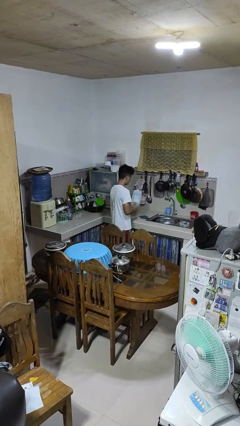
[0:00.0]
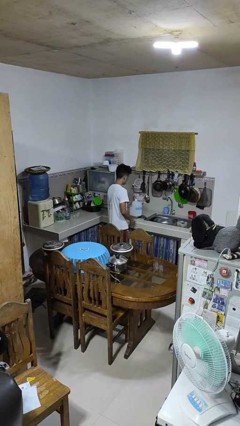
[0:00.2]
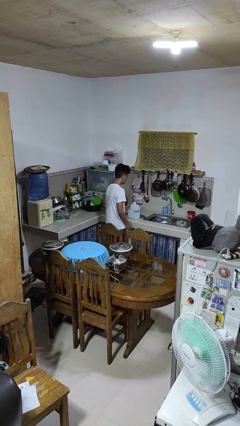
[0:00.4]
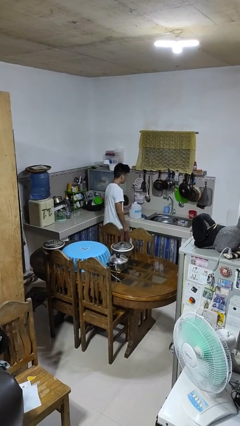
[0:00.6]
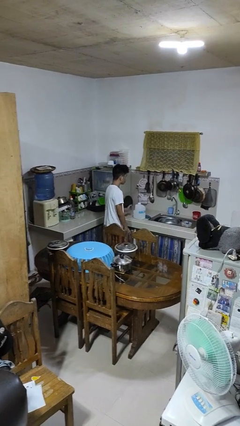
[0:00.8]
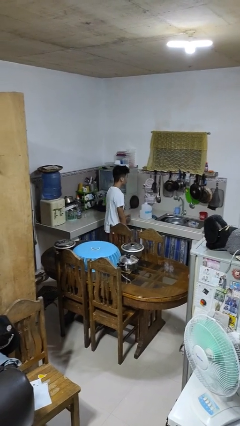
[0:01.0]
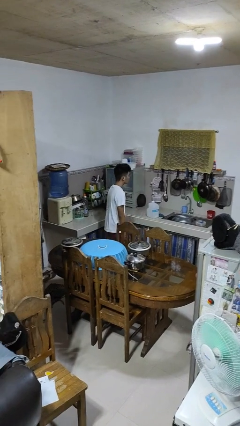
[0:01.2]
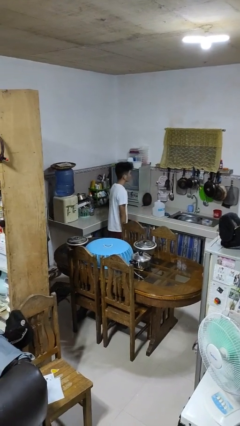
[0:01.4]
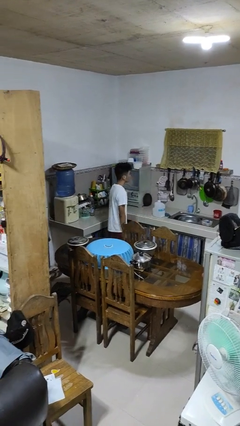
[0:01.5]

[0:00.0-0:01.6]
person puts down object on countertop

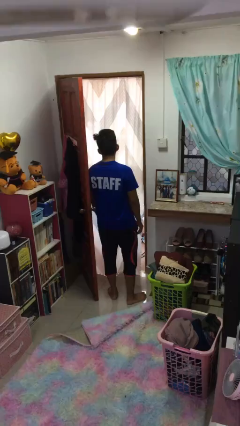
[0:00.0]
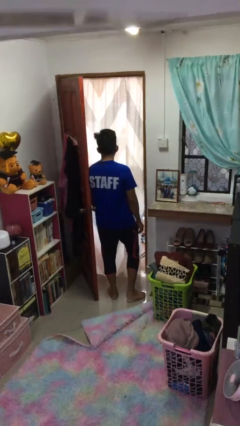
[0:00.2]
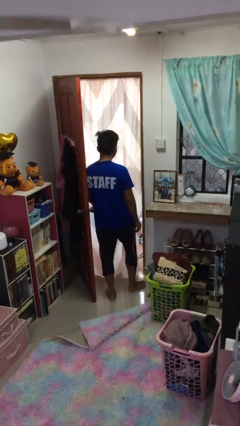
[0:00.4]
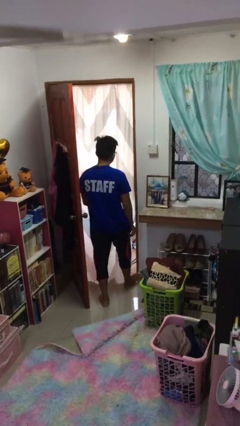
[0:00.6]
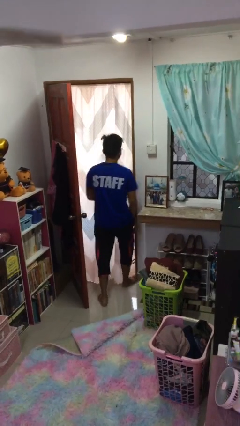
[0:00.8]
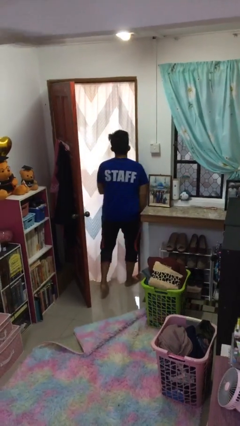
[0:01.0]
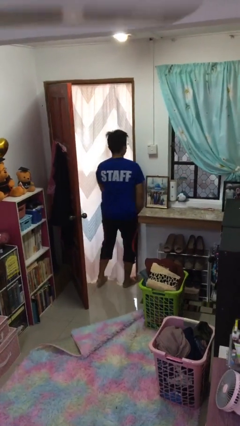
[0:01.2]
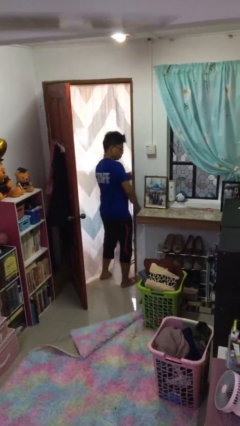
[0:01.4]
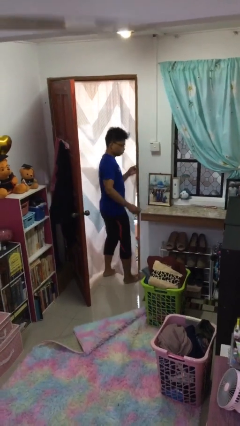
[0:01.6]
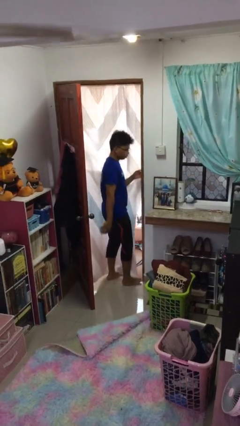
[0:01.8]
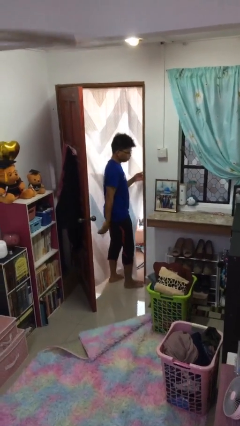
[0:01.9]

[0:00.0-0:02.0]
person bumps into wall

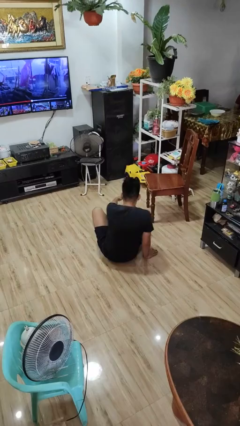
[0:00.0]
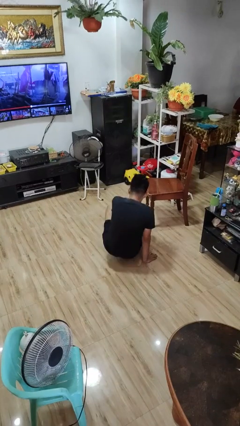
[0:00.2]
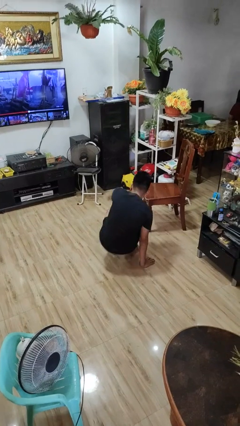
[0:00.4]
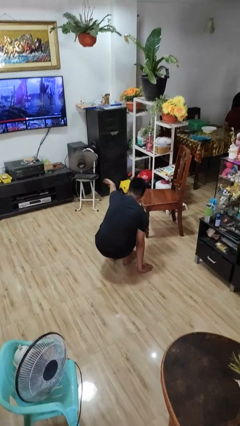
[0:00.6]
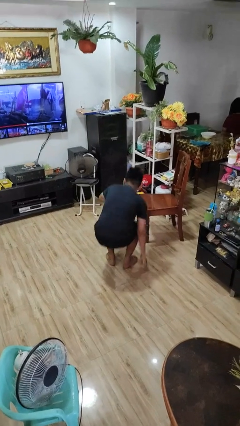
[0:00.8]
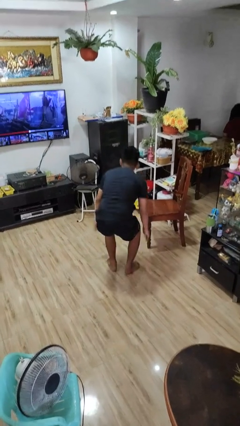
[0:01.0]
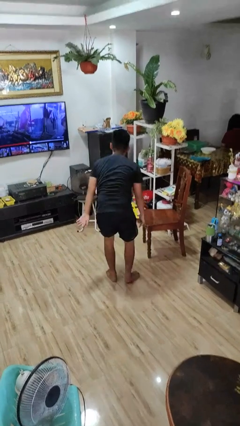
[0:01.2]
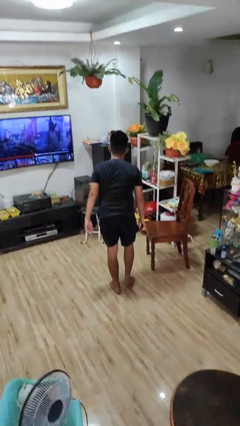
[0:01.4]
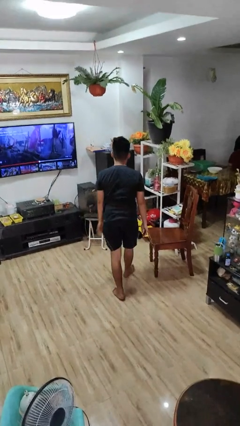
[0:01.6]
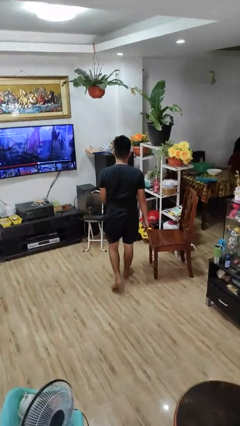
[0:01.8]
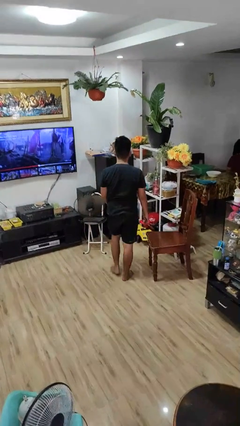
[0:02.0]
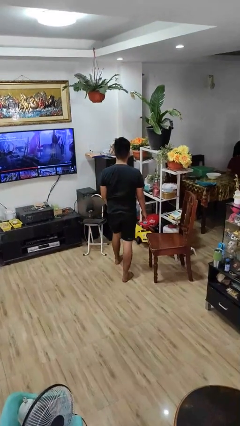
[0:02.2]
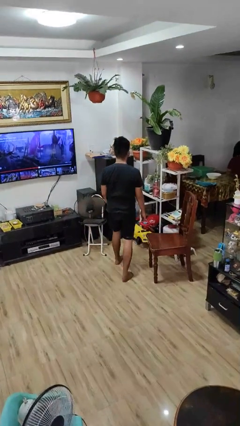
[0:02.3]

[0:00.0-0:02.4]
person stands up from floor

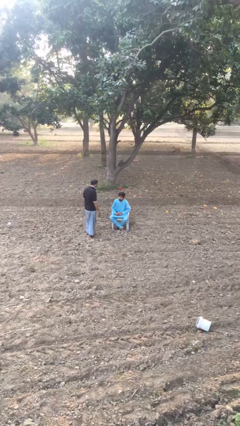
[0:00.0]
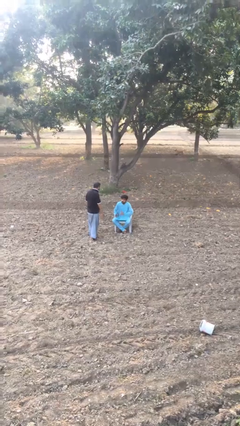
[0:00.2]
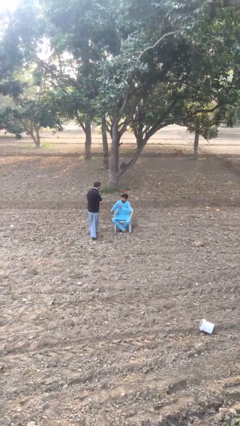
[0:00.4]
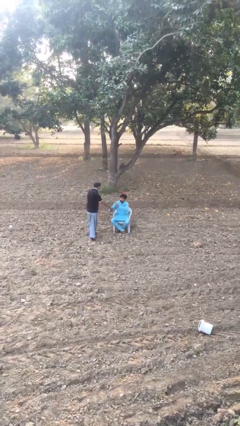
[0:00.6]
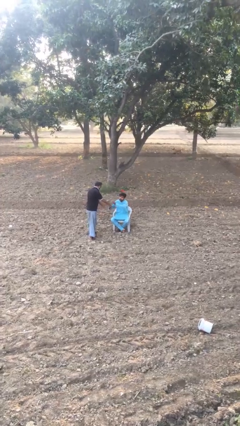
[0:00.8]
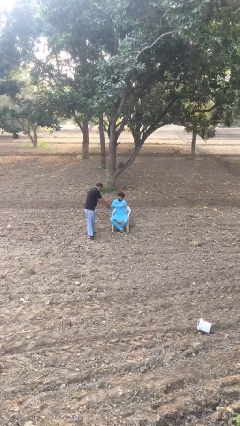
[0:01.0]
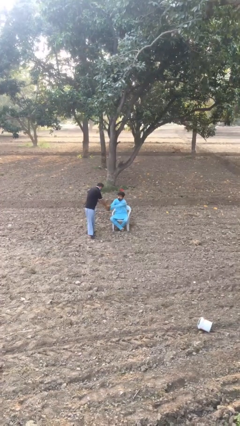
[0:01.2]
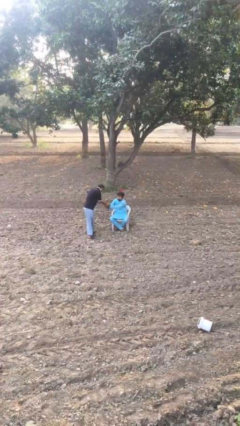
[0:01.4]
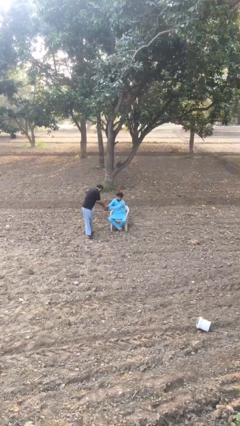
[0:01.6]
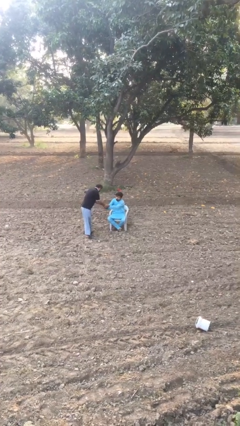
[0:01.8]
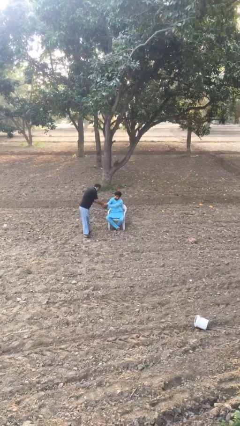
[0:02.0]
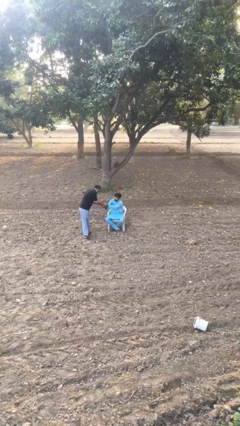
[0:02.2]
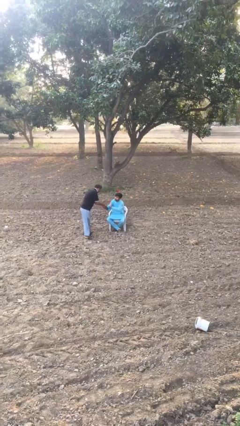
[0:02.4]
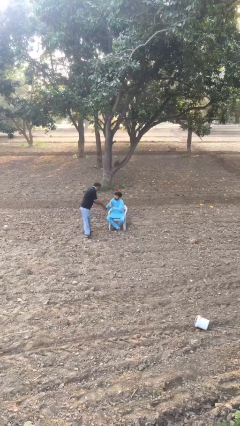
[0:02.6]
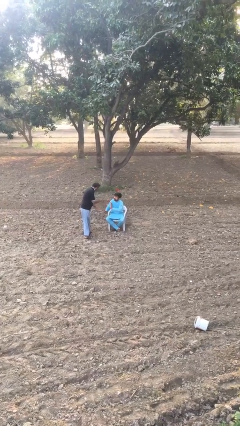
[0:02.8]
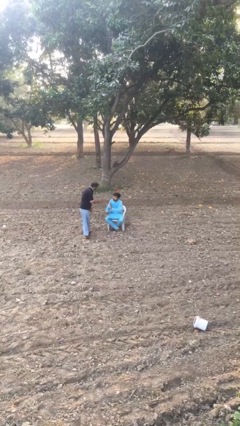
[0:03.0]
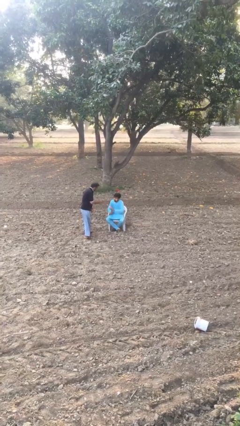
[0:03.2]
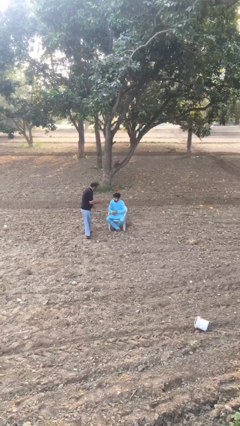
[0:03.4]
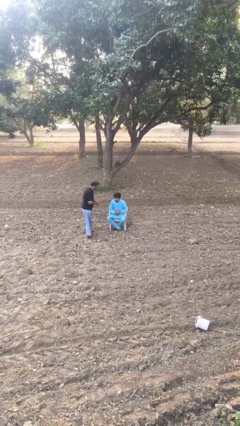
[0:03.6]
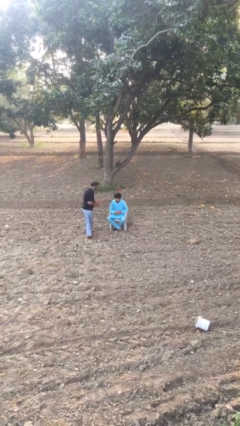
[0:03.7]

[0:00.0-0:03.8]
person shakes hand

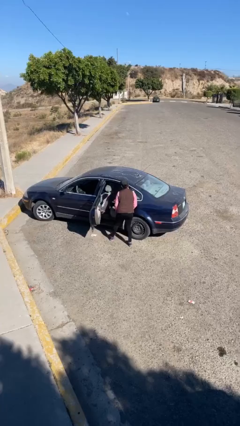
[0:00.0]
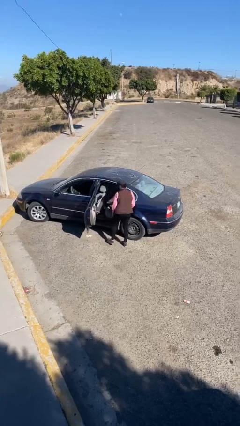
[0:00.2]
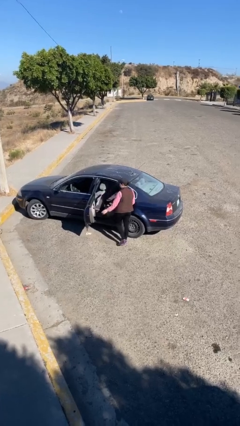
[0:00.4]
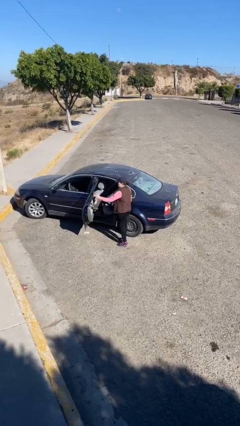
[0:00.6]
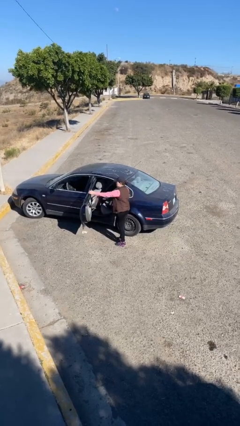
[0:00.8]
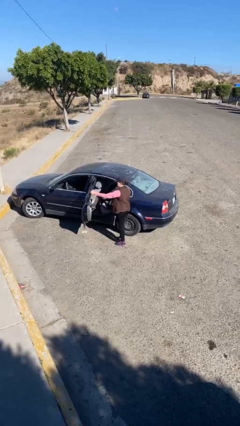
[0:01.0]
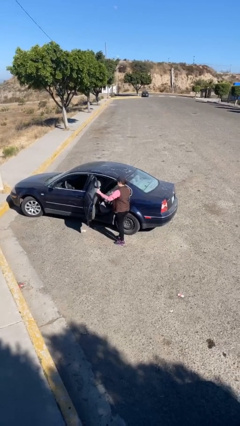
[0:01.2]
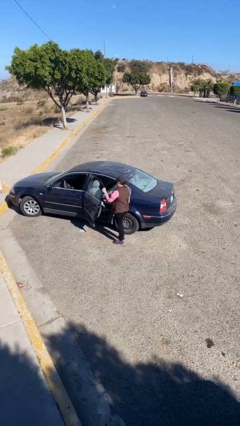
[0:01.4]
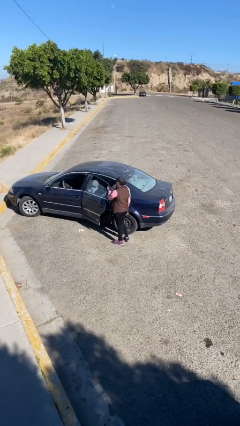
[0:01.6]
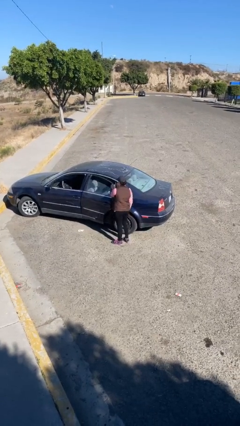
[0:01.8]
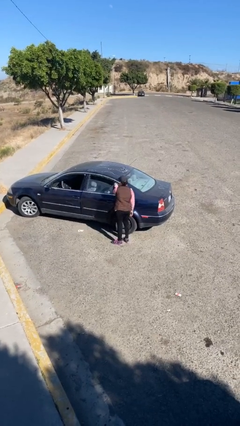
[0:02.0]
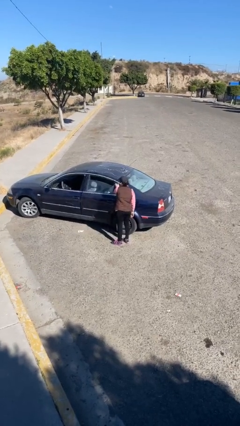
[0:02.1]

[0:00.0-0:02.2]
person closes car door

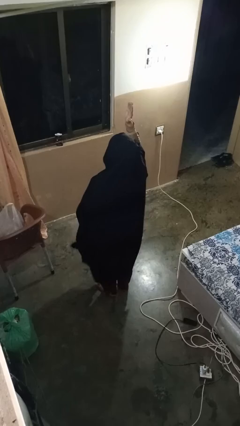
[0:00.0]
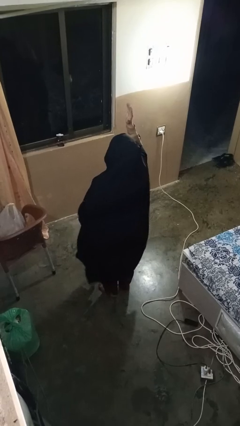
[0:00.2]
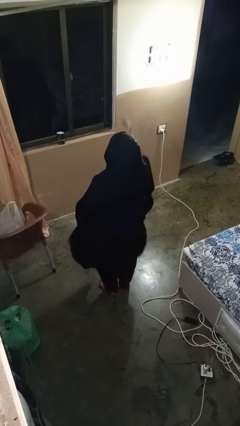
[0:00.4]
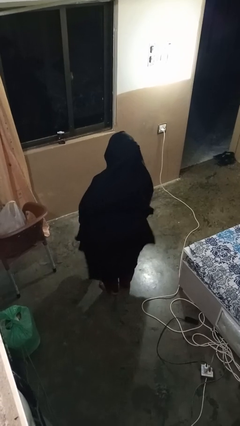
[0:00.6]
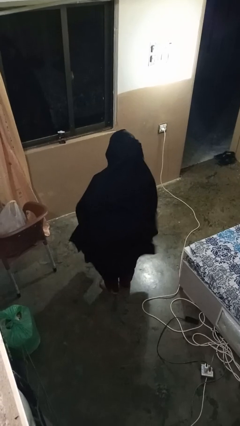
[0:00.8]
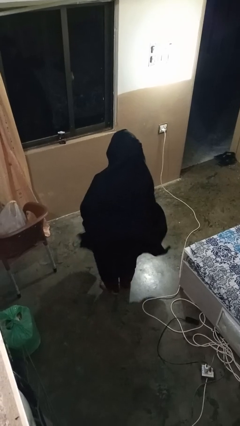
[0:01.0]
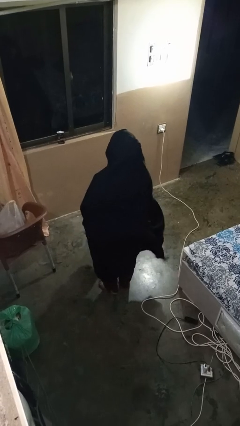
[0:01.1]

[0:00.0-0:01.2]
person gestures lower hand

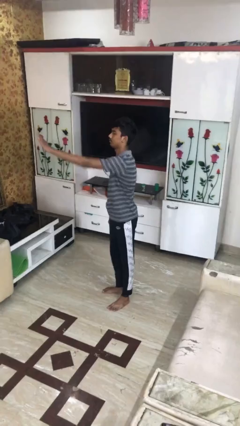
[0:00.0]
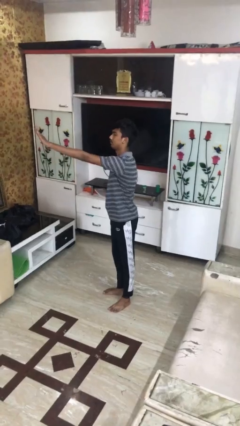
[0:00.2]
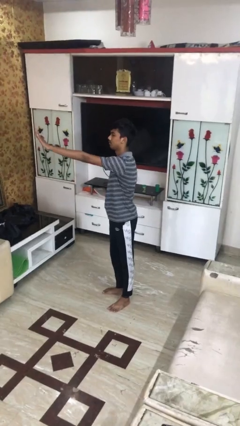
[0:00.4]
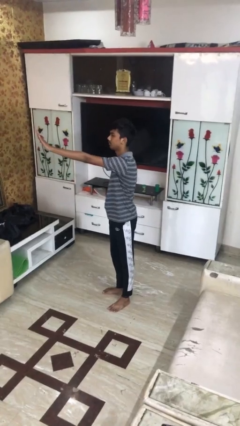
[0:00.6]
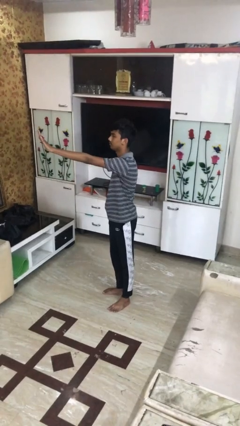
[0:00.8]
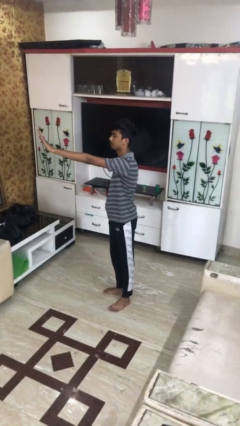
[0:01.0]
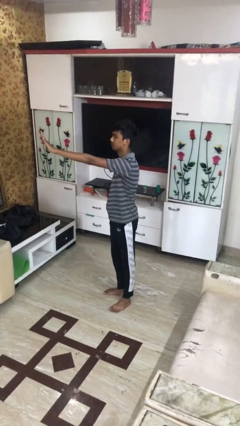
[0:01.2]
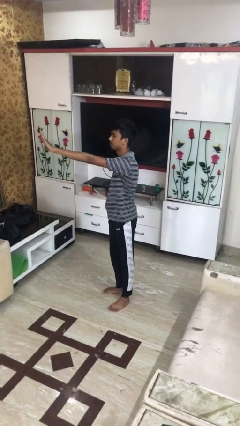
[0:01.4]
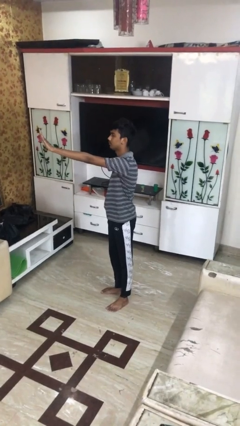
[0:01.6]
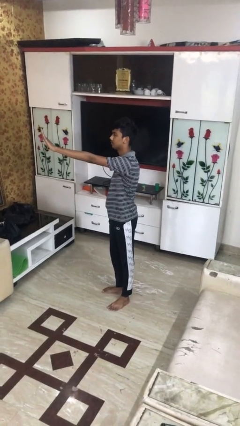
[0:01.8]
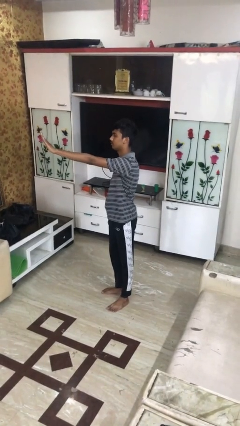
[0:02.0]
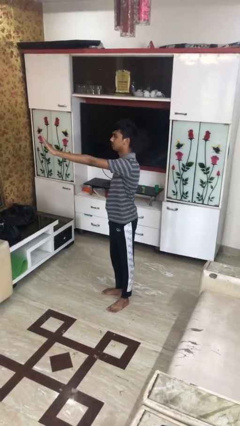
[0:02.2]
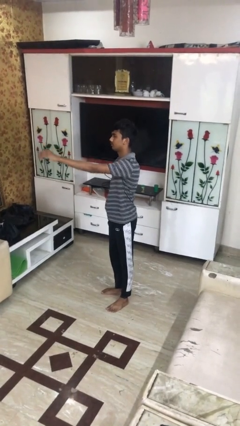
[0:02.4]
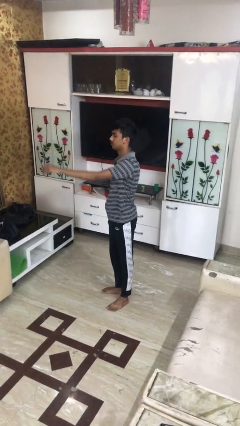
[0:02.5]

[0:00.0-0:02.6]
person gestures stop

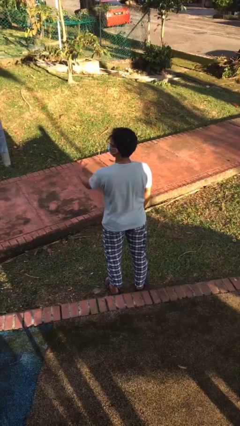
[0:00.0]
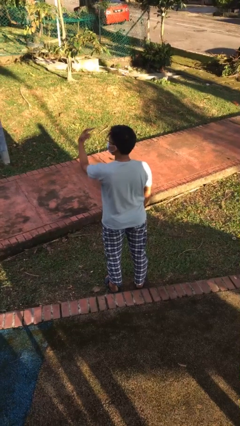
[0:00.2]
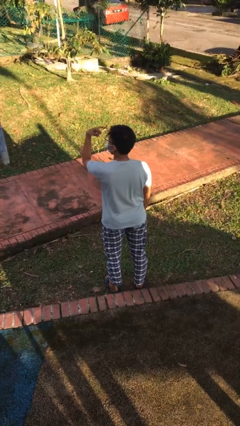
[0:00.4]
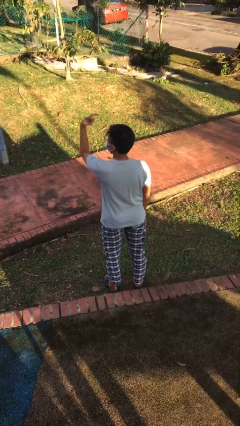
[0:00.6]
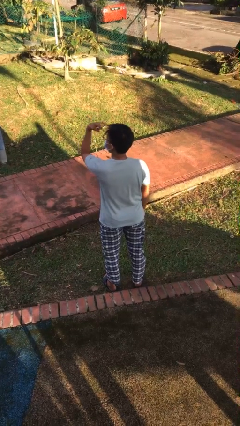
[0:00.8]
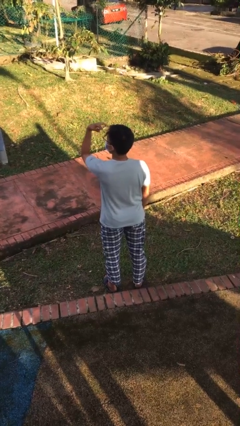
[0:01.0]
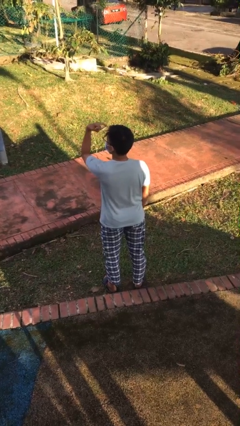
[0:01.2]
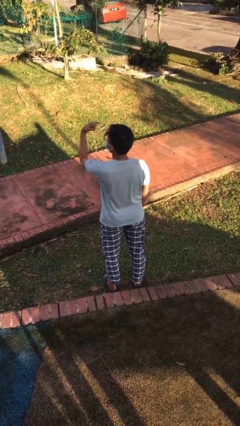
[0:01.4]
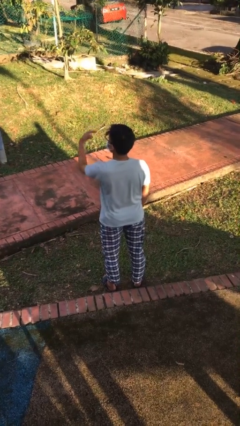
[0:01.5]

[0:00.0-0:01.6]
person gestures watch closely
